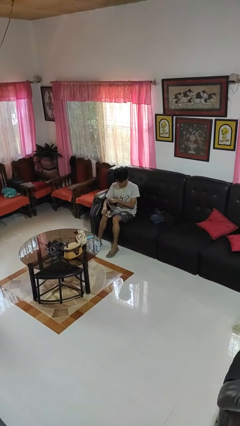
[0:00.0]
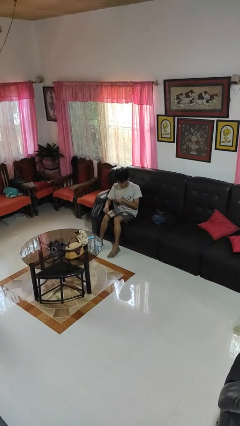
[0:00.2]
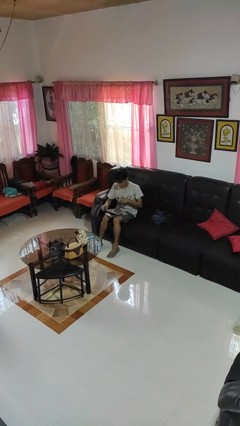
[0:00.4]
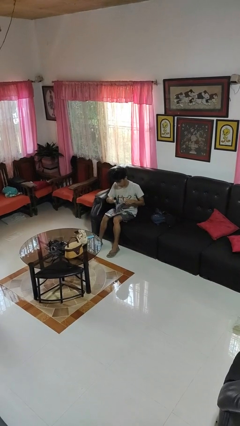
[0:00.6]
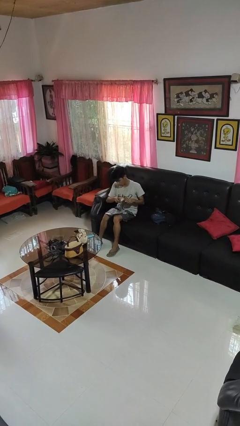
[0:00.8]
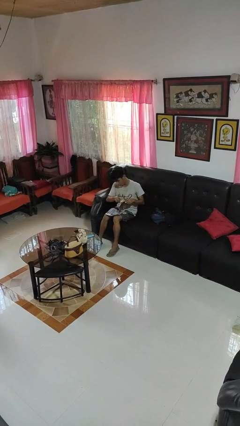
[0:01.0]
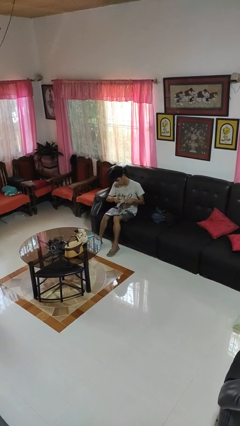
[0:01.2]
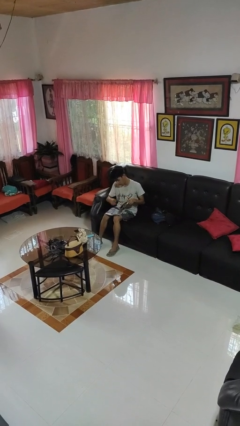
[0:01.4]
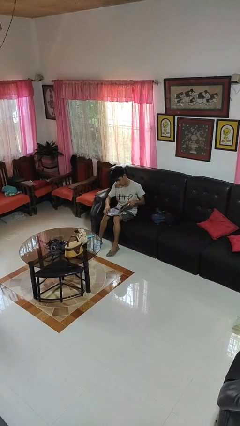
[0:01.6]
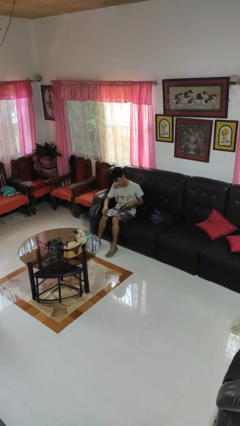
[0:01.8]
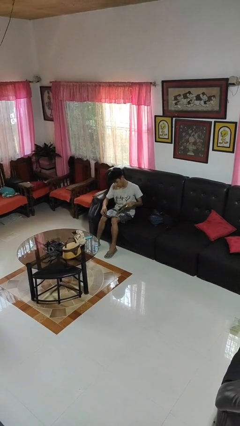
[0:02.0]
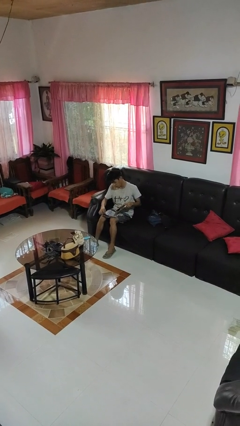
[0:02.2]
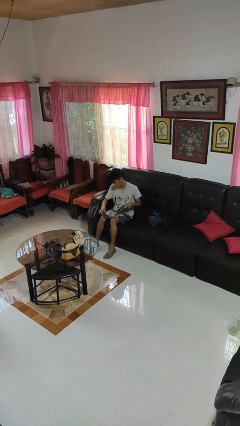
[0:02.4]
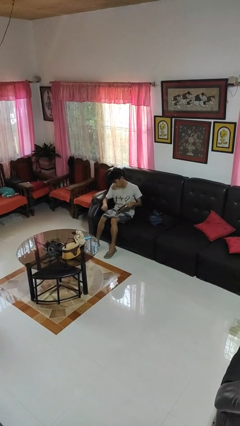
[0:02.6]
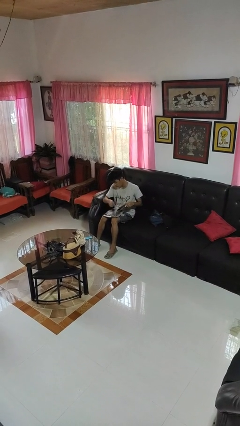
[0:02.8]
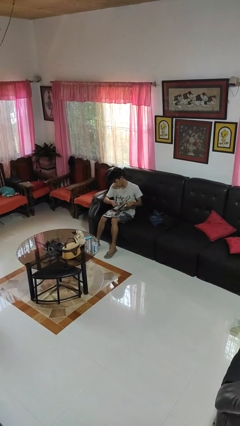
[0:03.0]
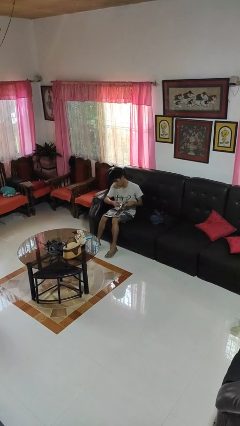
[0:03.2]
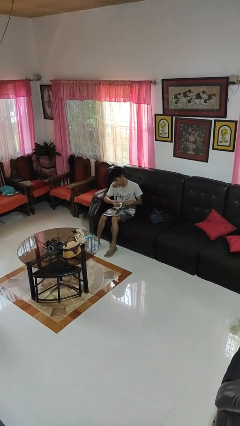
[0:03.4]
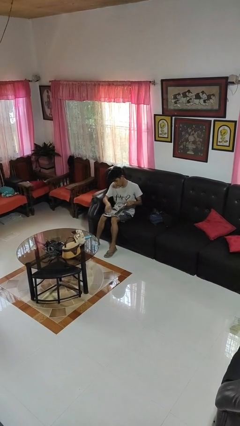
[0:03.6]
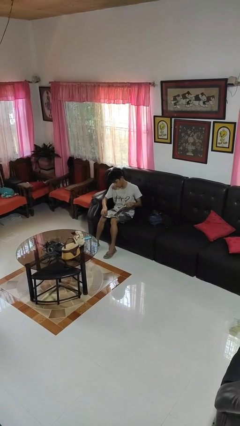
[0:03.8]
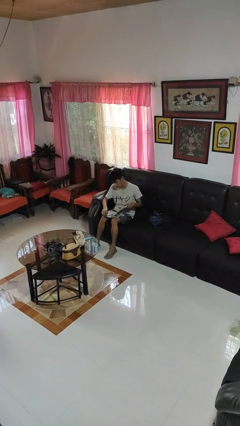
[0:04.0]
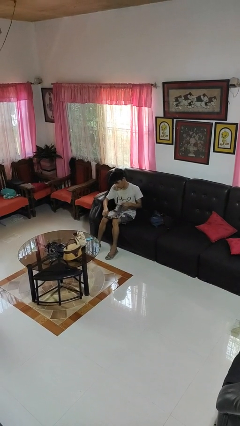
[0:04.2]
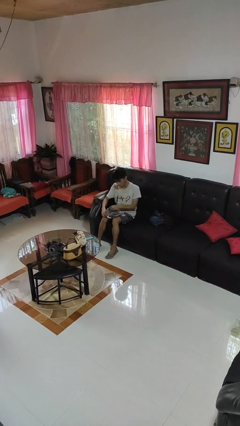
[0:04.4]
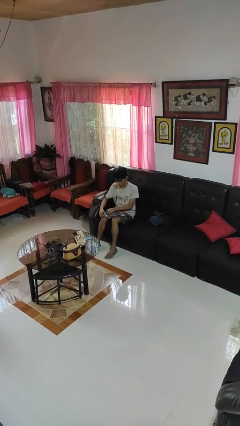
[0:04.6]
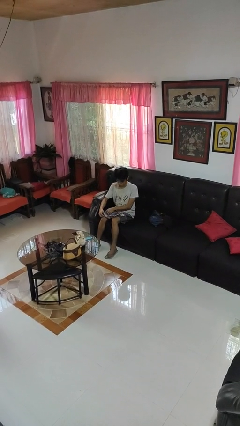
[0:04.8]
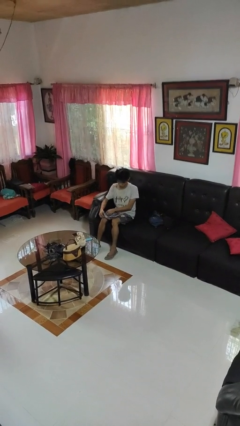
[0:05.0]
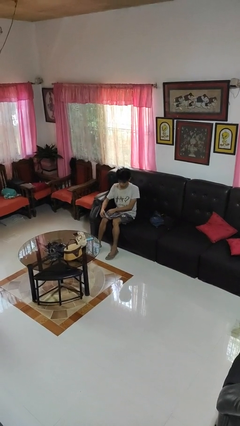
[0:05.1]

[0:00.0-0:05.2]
person reads magazine

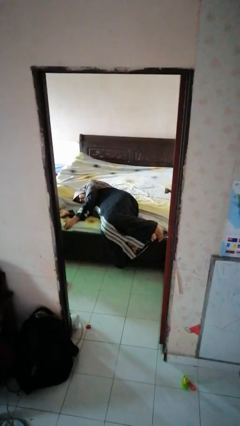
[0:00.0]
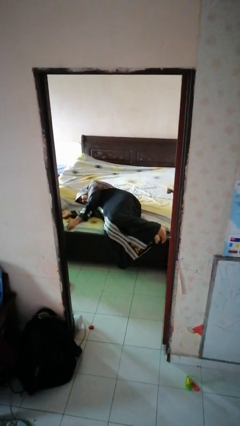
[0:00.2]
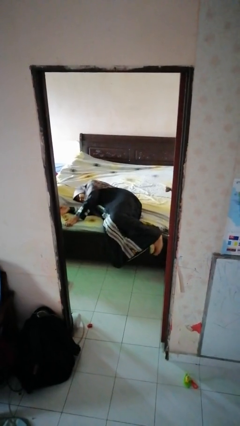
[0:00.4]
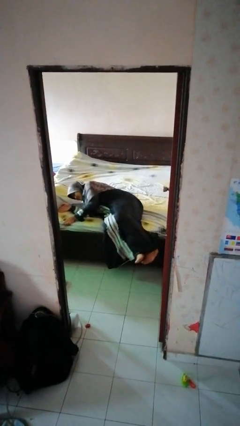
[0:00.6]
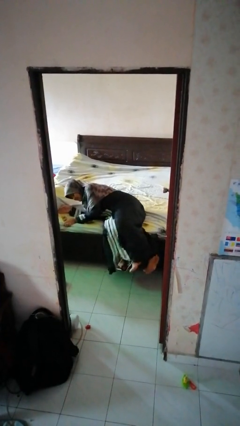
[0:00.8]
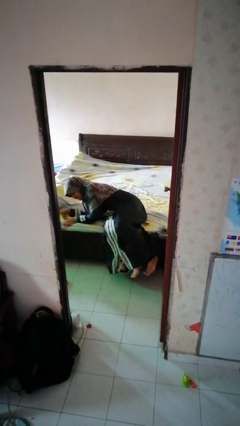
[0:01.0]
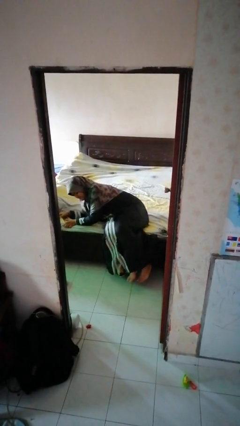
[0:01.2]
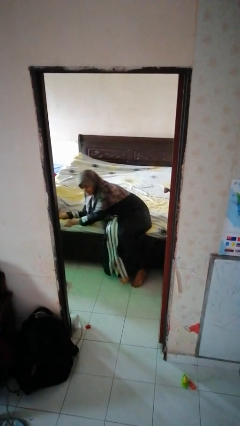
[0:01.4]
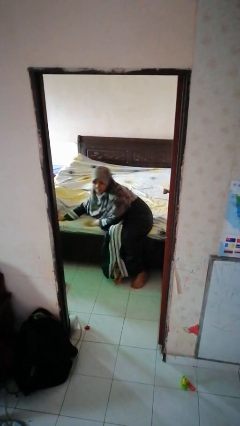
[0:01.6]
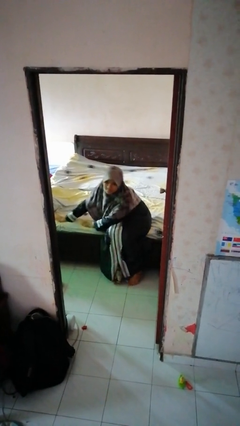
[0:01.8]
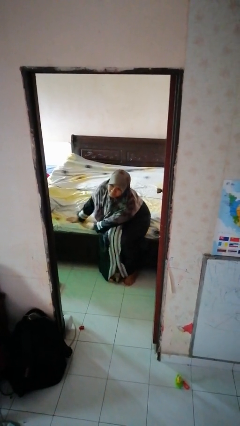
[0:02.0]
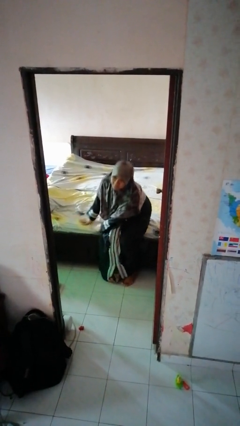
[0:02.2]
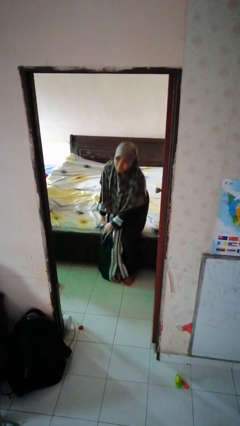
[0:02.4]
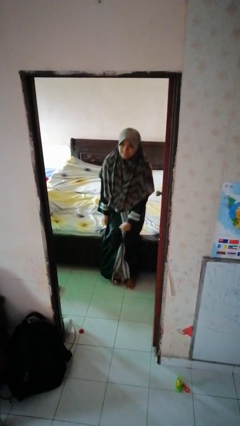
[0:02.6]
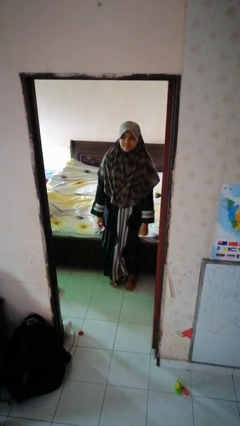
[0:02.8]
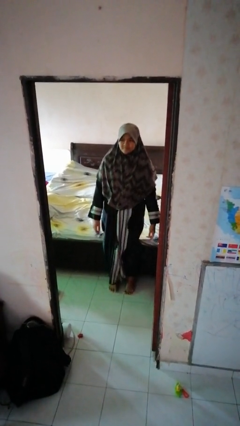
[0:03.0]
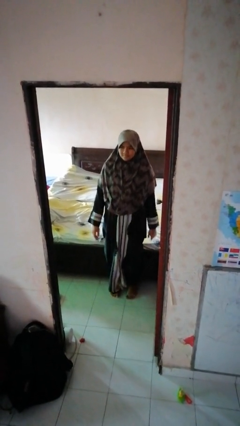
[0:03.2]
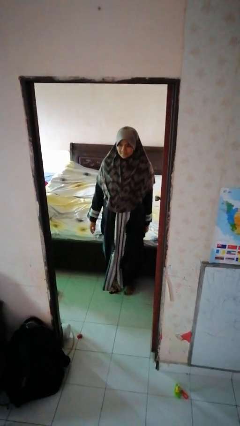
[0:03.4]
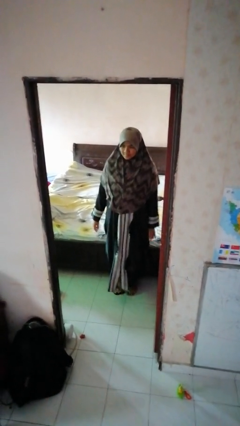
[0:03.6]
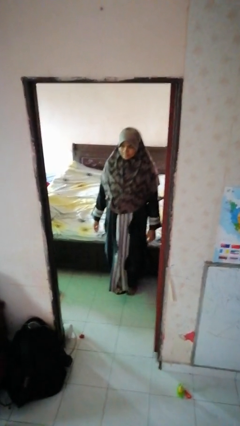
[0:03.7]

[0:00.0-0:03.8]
person stands up

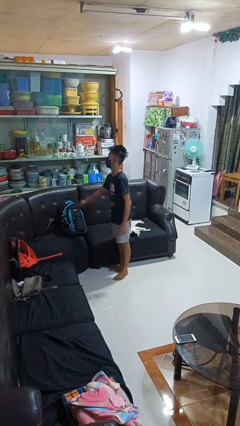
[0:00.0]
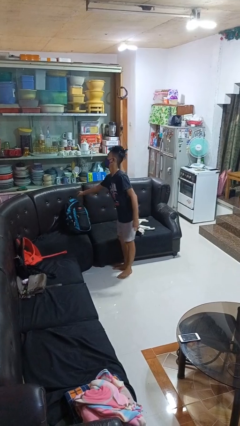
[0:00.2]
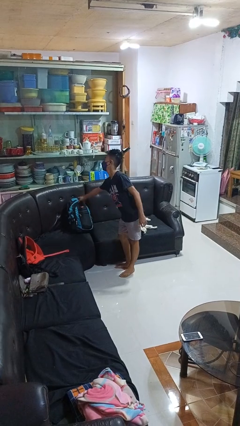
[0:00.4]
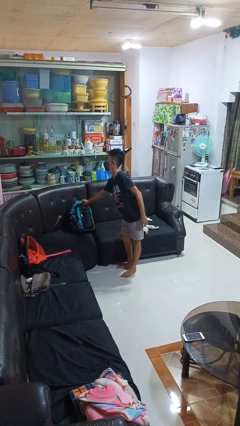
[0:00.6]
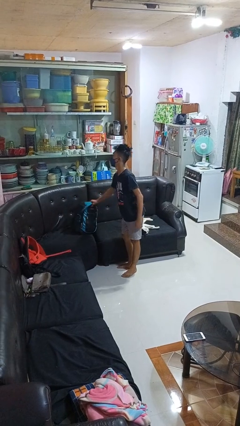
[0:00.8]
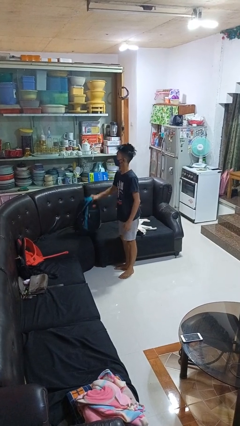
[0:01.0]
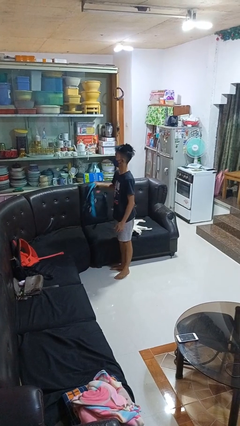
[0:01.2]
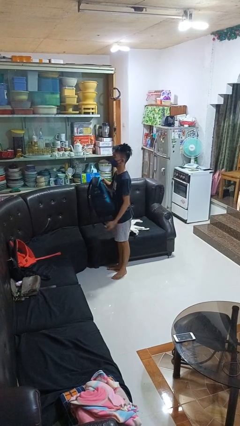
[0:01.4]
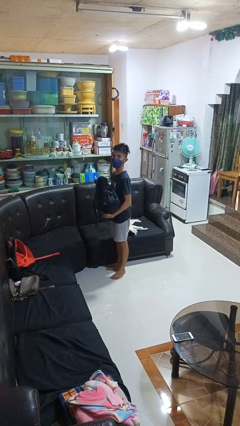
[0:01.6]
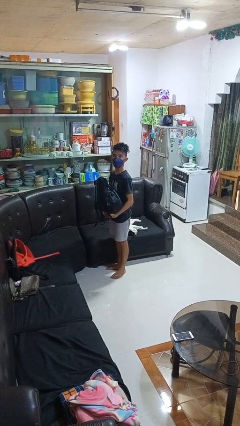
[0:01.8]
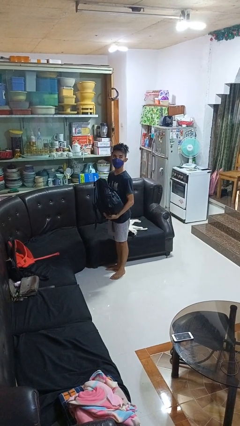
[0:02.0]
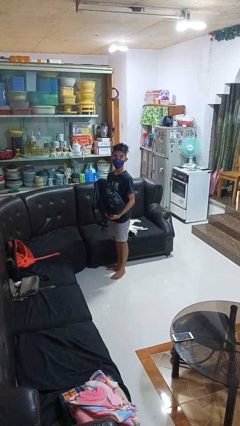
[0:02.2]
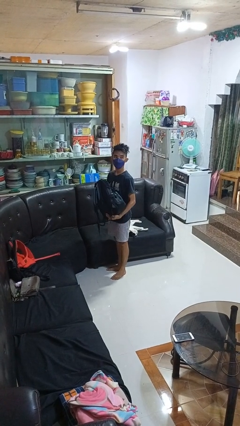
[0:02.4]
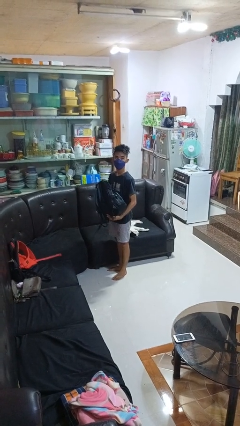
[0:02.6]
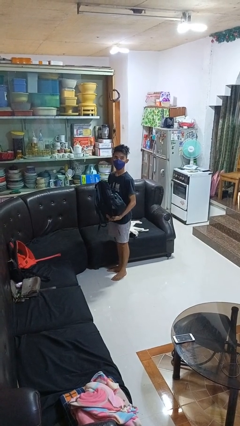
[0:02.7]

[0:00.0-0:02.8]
person picks up object from couch

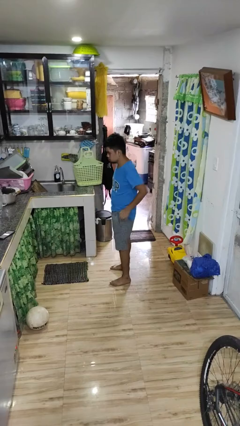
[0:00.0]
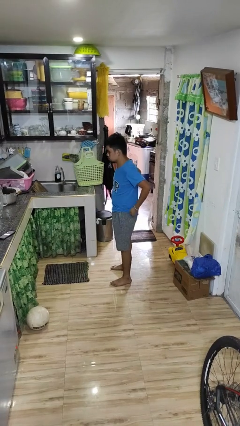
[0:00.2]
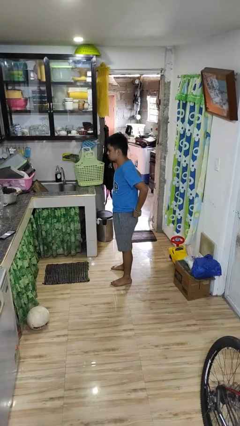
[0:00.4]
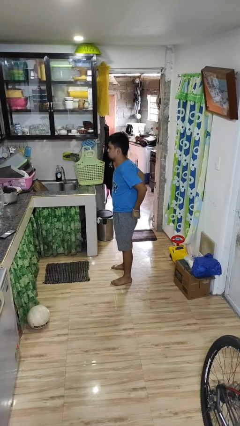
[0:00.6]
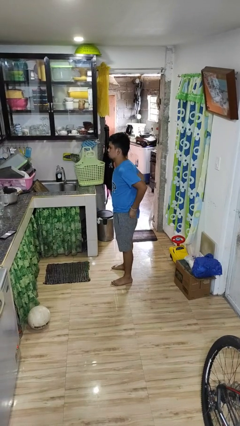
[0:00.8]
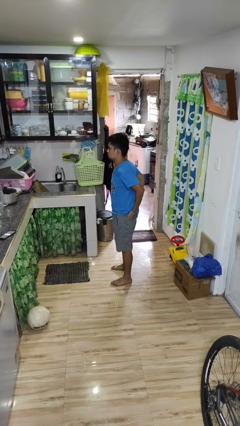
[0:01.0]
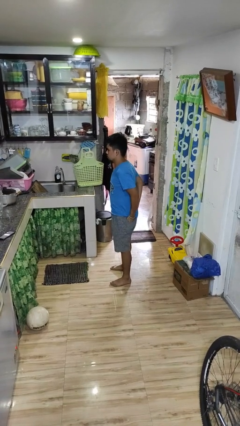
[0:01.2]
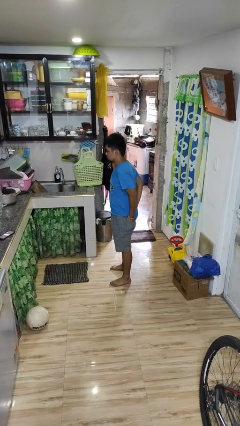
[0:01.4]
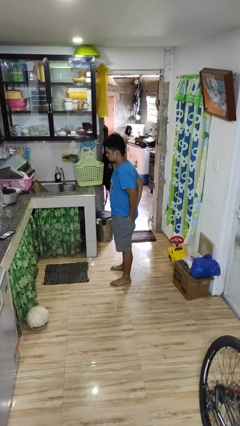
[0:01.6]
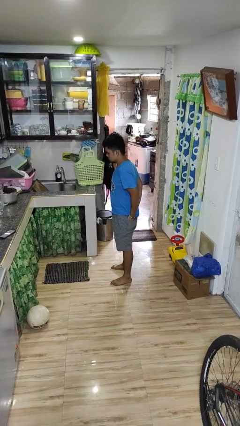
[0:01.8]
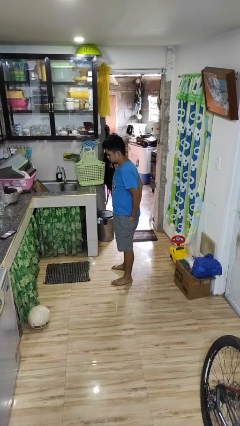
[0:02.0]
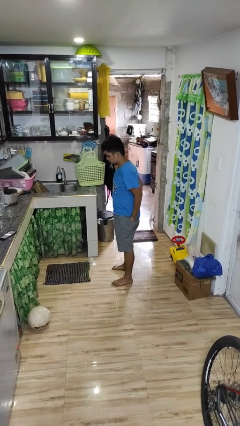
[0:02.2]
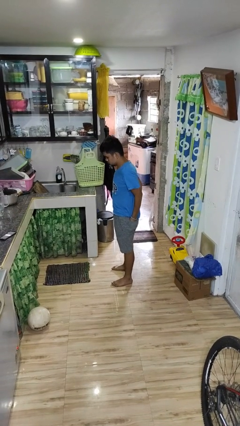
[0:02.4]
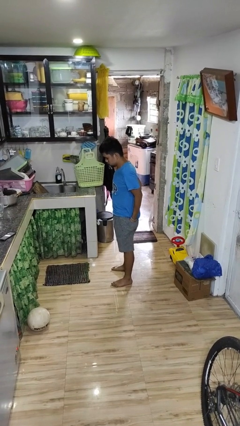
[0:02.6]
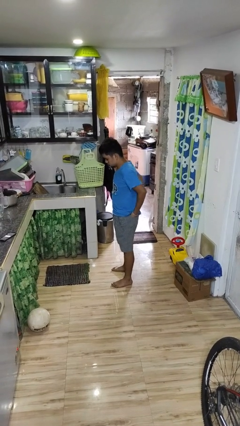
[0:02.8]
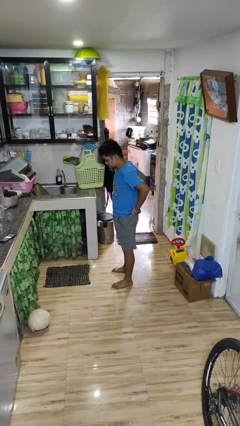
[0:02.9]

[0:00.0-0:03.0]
person puts hands in back pockets

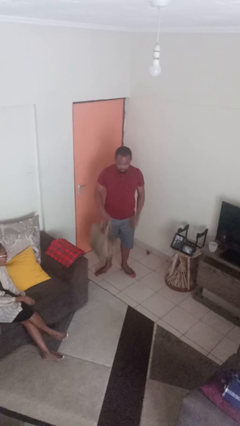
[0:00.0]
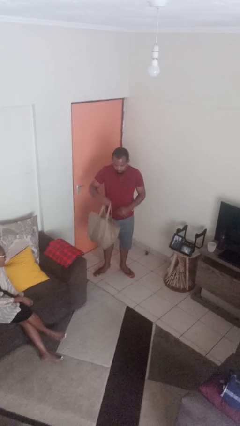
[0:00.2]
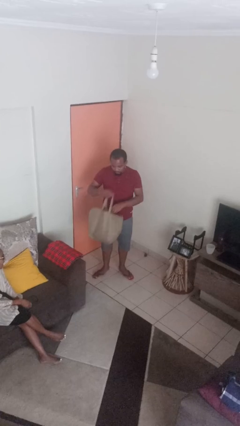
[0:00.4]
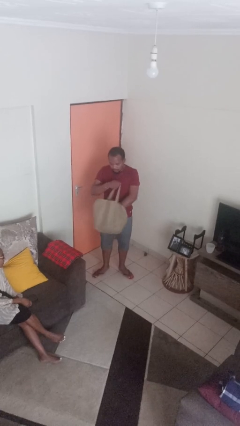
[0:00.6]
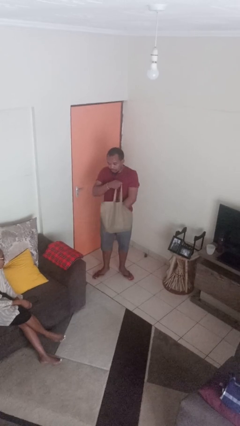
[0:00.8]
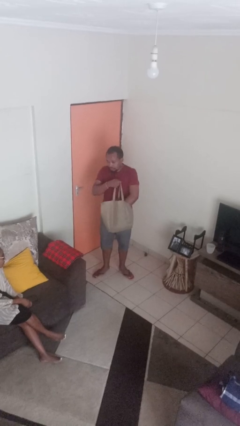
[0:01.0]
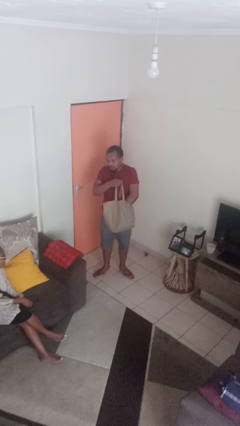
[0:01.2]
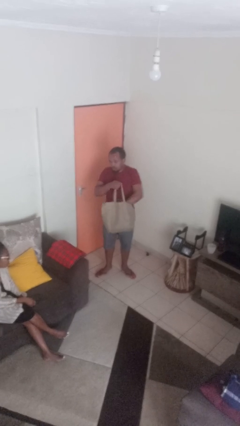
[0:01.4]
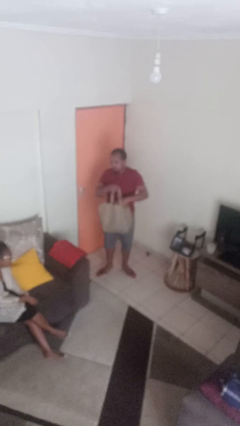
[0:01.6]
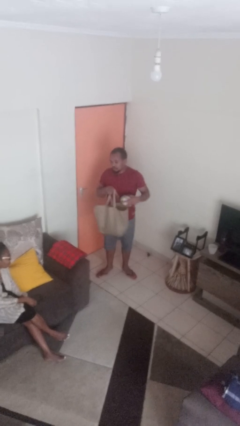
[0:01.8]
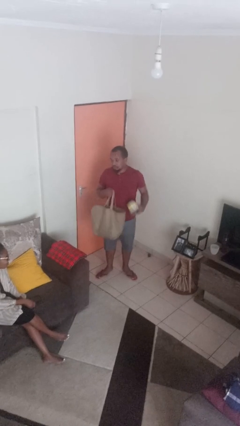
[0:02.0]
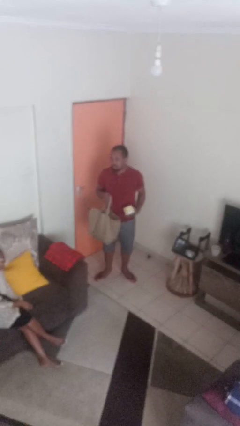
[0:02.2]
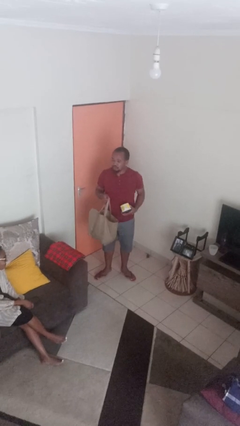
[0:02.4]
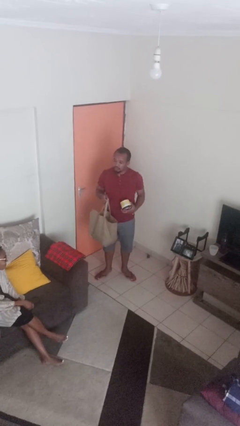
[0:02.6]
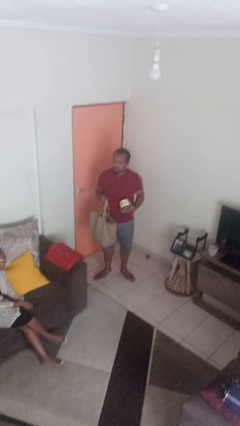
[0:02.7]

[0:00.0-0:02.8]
person takes object from bag
